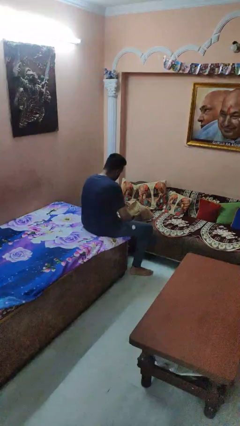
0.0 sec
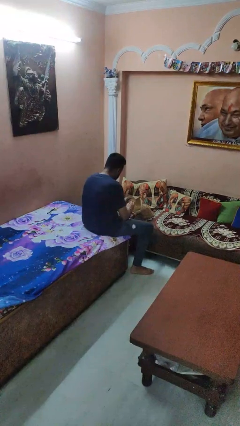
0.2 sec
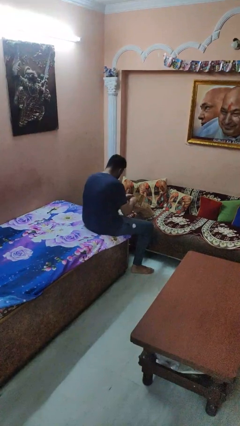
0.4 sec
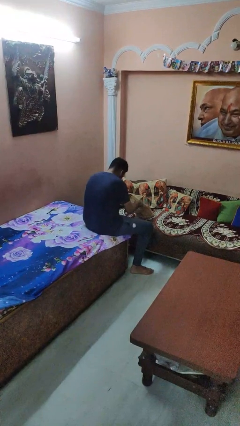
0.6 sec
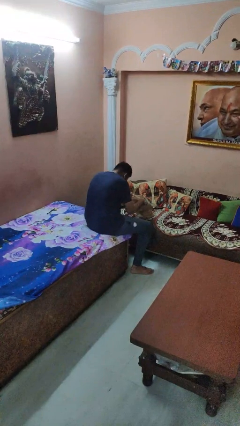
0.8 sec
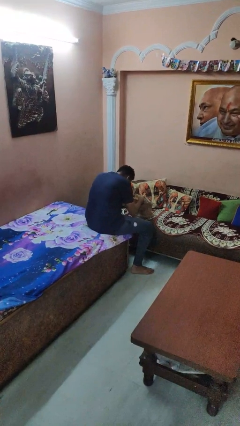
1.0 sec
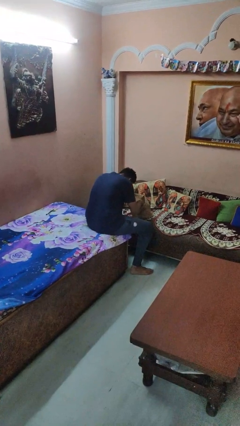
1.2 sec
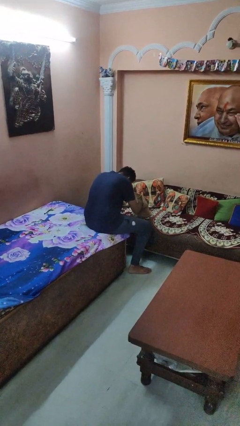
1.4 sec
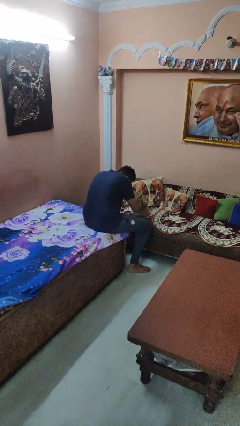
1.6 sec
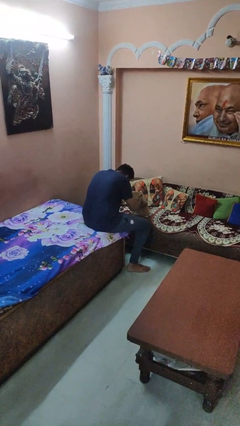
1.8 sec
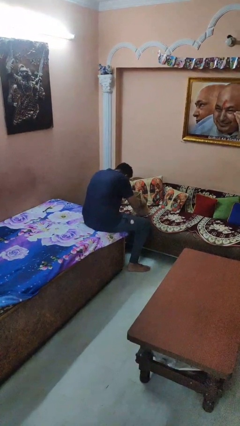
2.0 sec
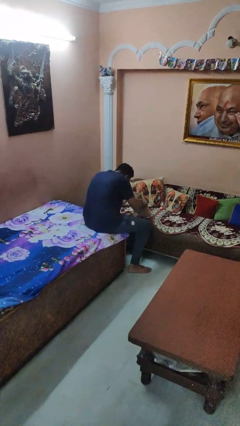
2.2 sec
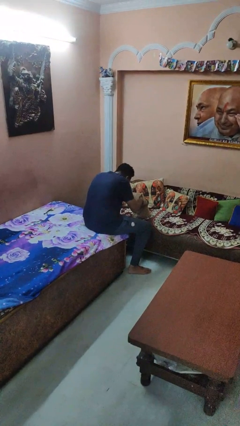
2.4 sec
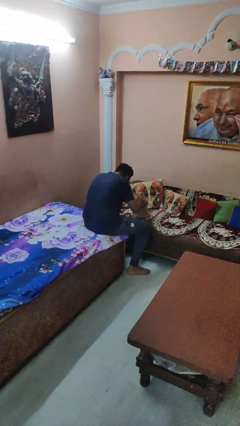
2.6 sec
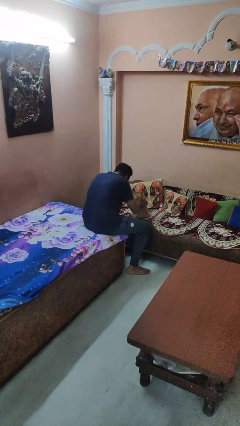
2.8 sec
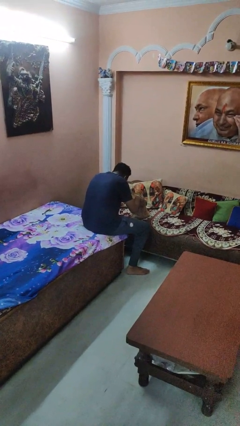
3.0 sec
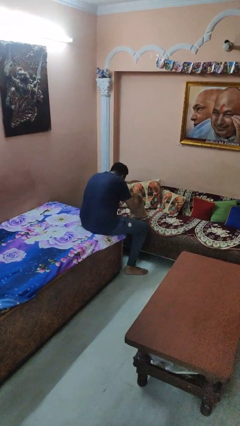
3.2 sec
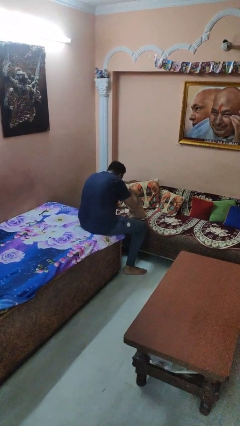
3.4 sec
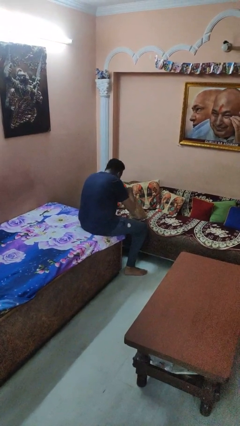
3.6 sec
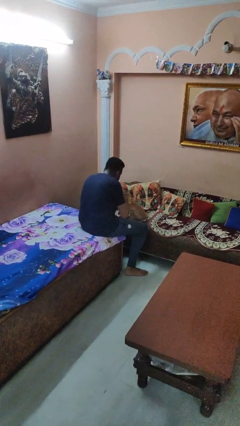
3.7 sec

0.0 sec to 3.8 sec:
person searches in bag

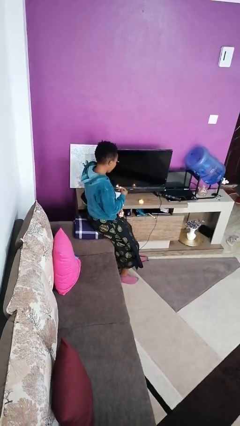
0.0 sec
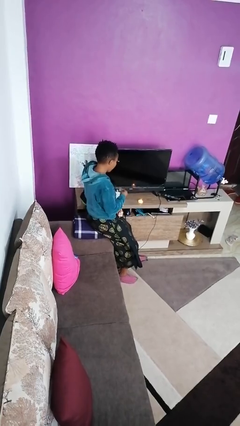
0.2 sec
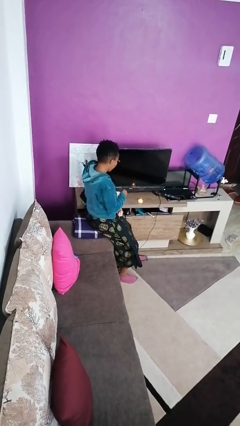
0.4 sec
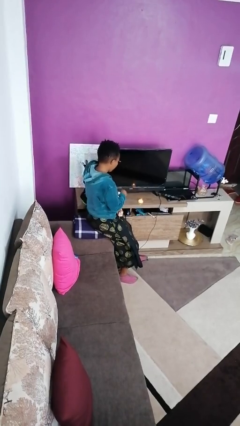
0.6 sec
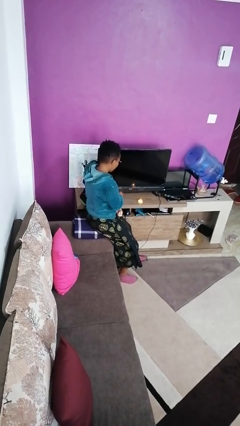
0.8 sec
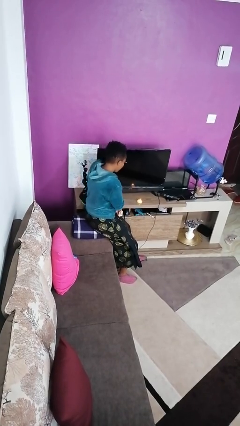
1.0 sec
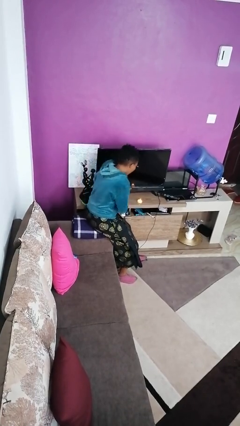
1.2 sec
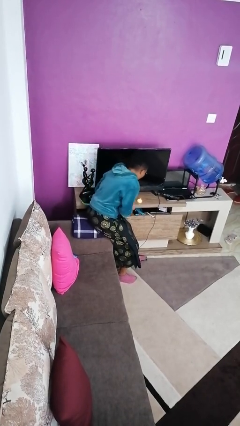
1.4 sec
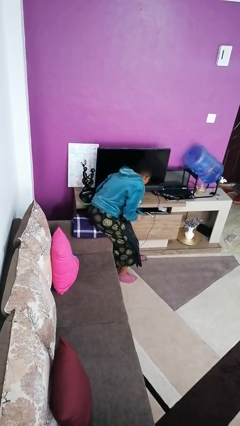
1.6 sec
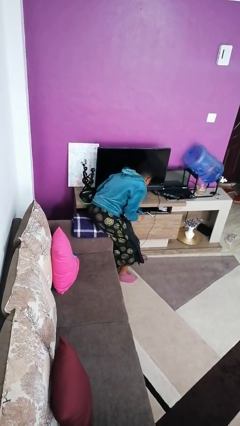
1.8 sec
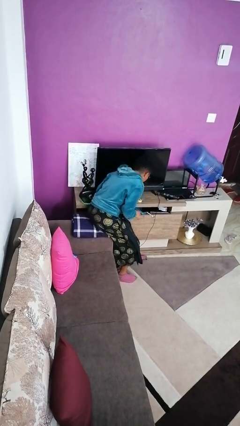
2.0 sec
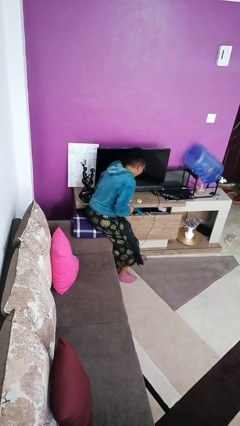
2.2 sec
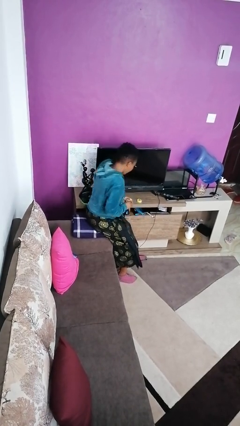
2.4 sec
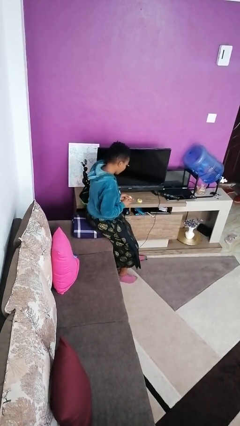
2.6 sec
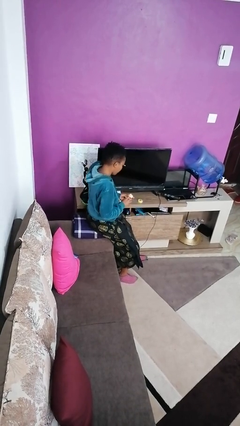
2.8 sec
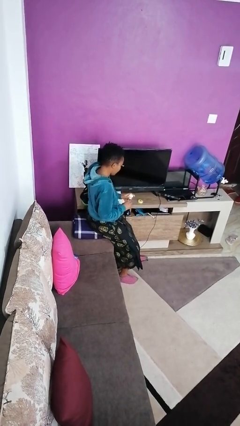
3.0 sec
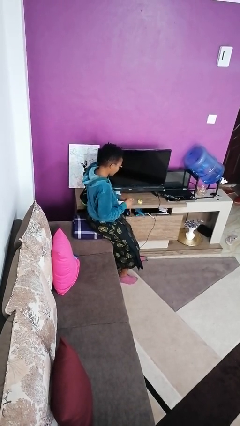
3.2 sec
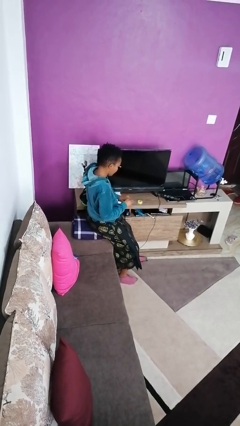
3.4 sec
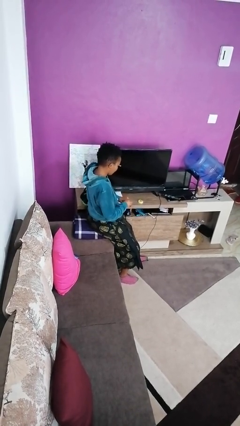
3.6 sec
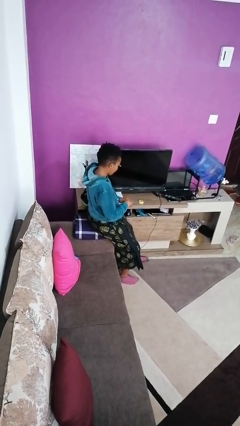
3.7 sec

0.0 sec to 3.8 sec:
person extinguishes candle

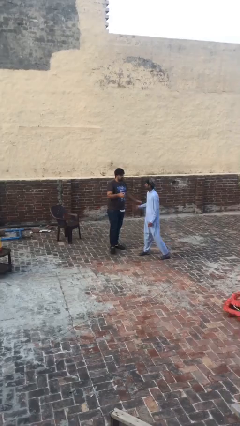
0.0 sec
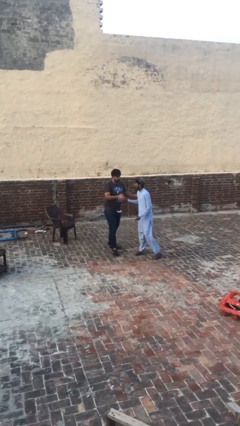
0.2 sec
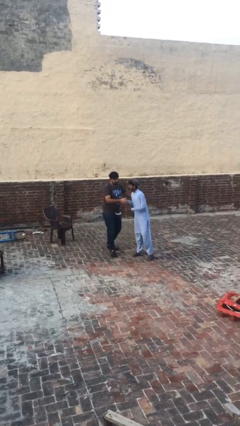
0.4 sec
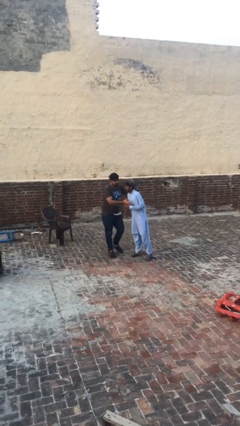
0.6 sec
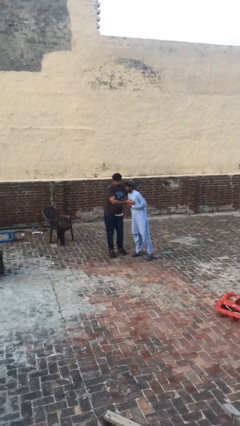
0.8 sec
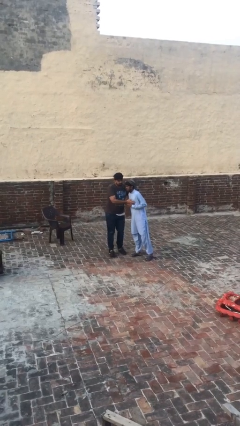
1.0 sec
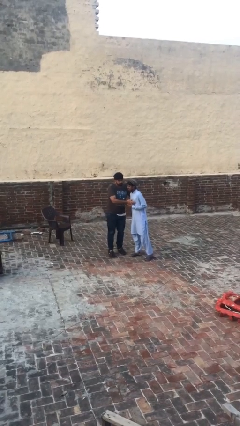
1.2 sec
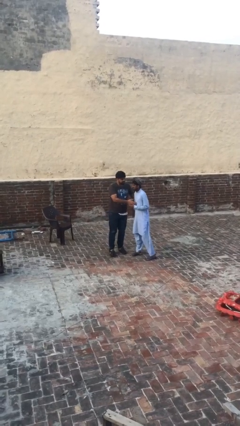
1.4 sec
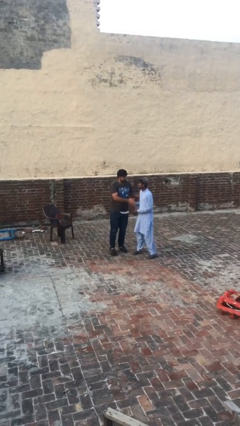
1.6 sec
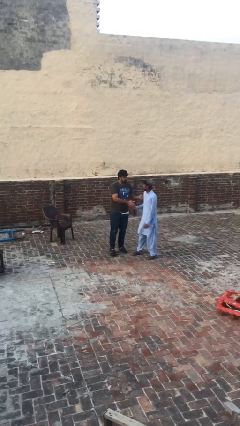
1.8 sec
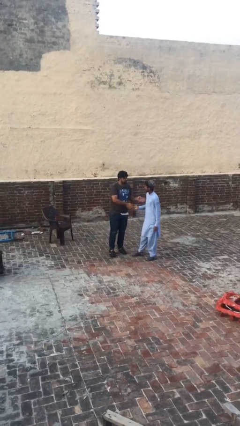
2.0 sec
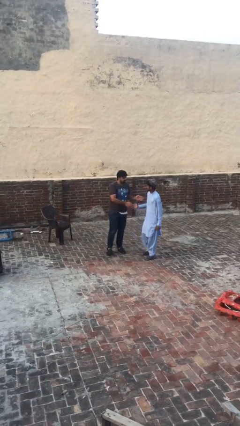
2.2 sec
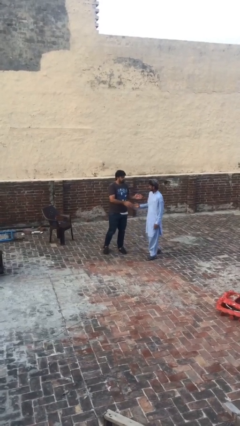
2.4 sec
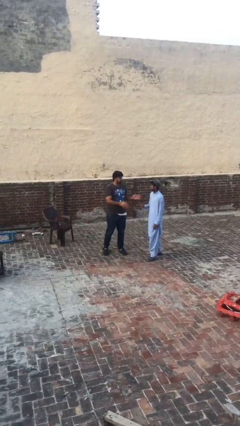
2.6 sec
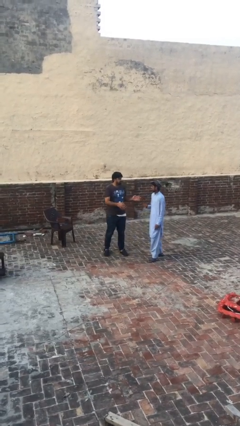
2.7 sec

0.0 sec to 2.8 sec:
person embraces person

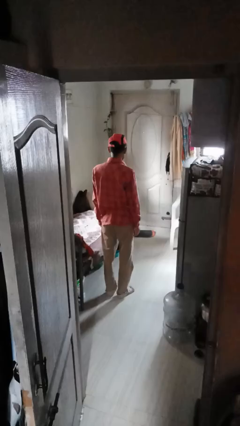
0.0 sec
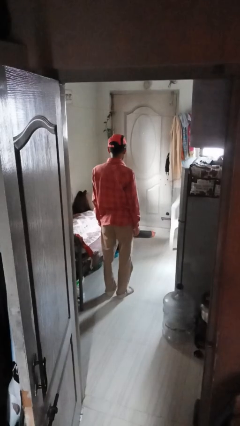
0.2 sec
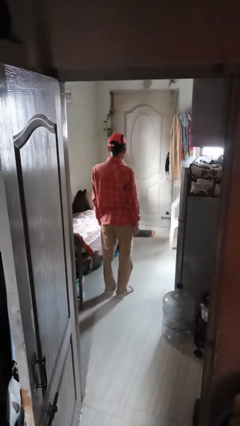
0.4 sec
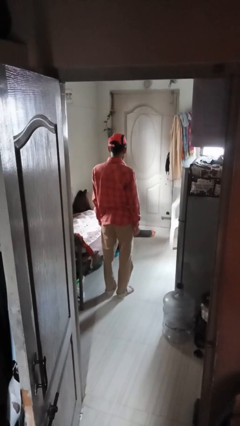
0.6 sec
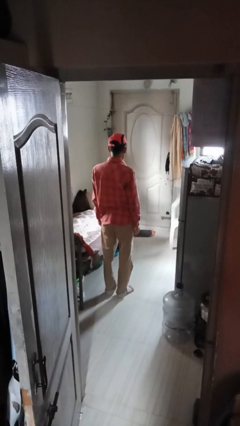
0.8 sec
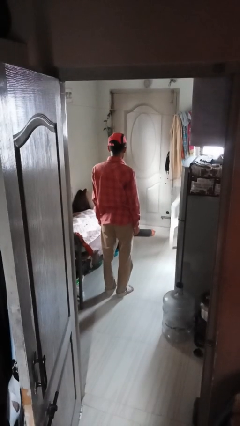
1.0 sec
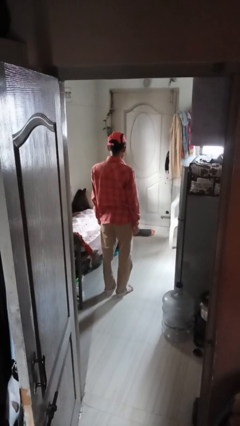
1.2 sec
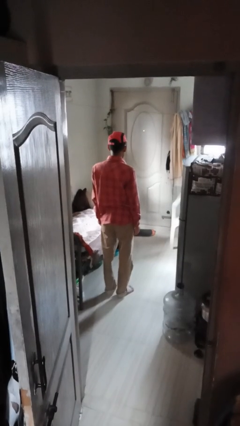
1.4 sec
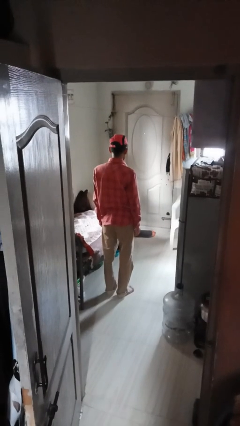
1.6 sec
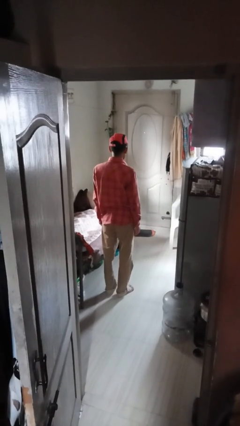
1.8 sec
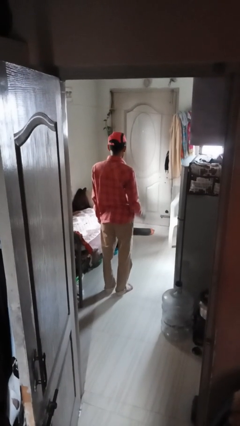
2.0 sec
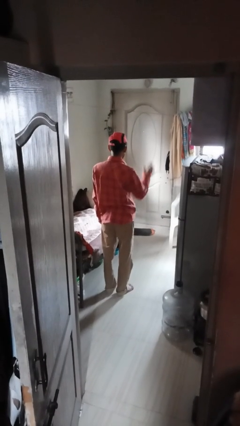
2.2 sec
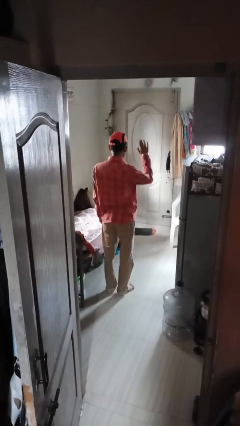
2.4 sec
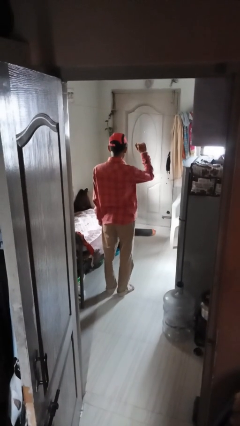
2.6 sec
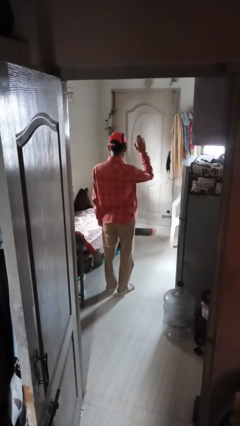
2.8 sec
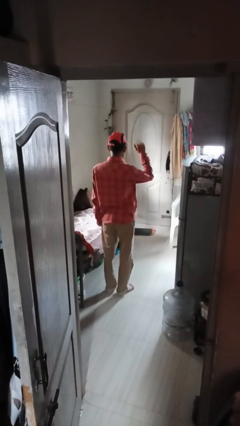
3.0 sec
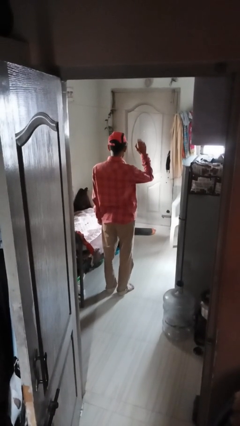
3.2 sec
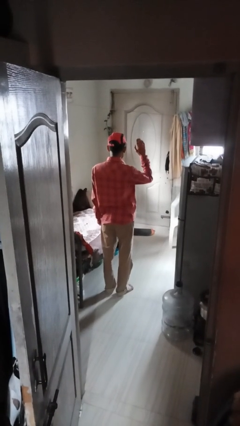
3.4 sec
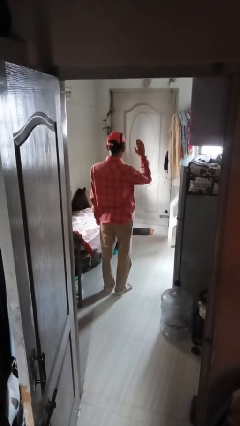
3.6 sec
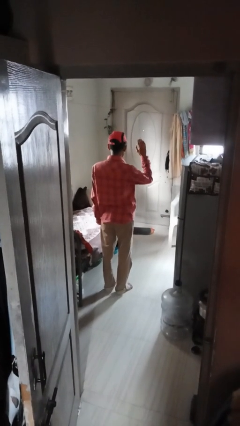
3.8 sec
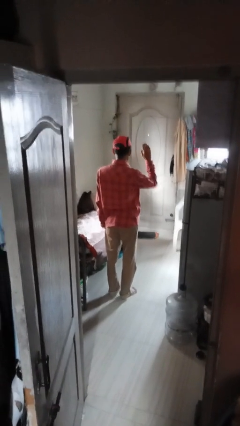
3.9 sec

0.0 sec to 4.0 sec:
person gestures come here

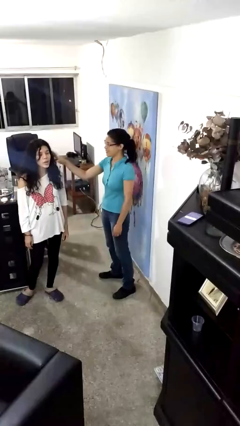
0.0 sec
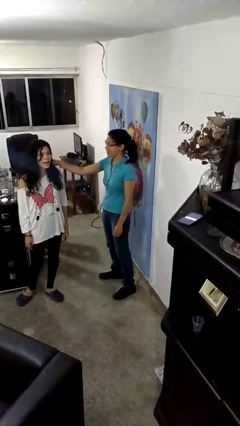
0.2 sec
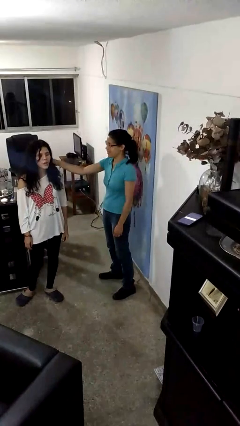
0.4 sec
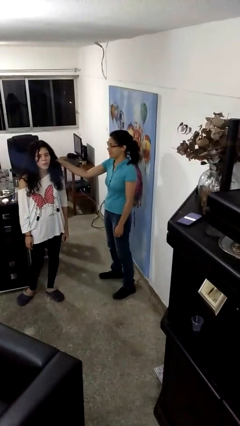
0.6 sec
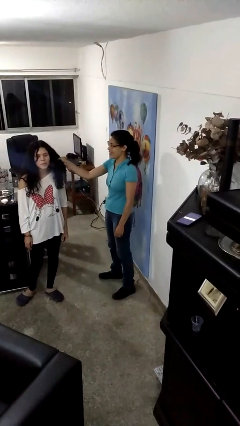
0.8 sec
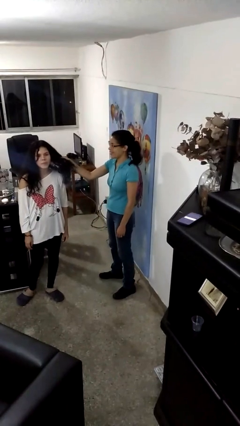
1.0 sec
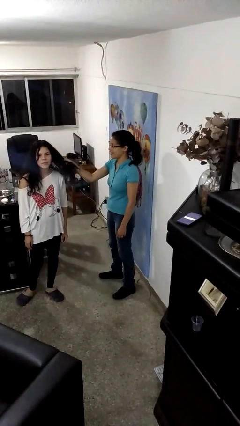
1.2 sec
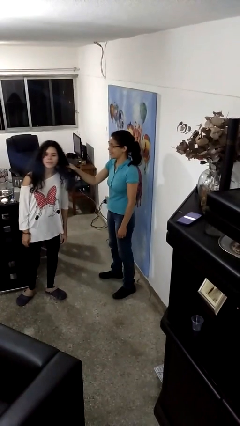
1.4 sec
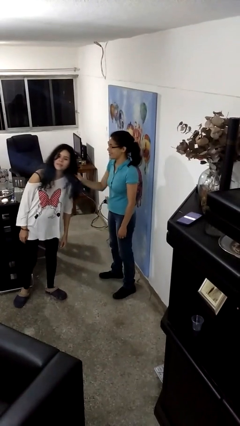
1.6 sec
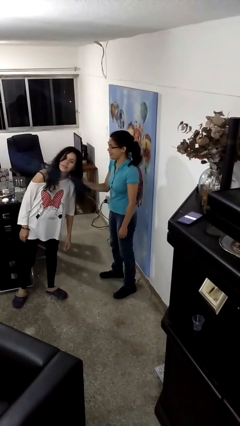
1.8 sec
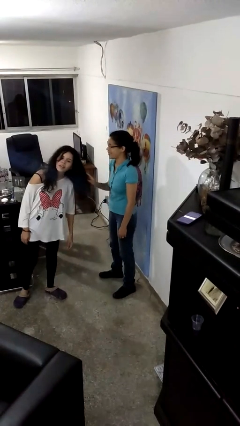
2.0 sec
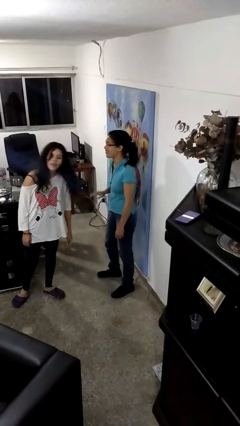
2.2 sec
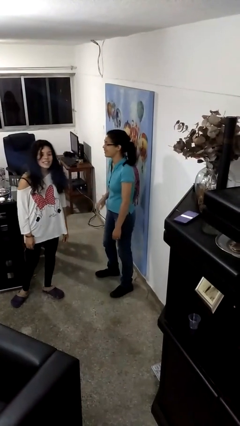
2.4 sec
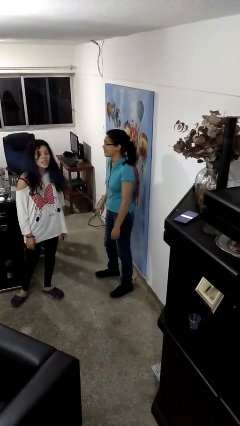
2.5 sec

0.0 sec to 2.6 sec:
person grabs person by hair

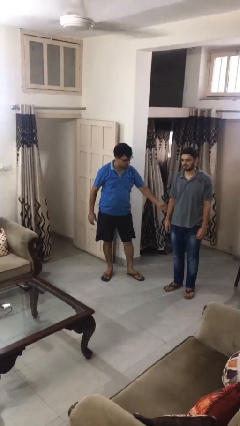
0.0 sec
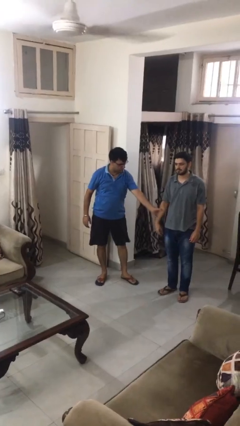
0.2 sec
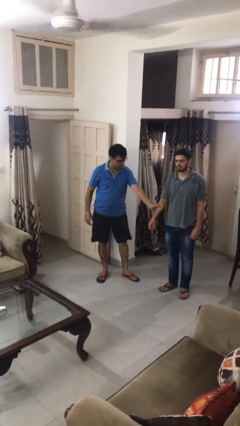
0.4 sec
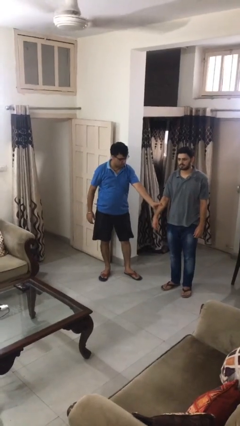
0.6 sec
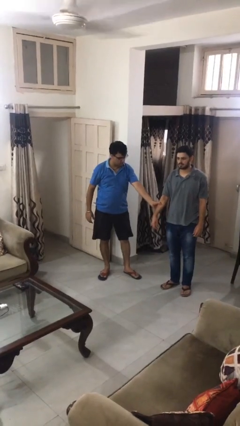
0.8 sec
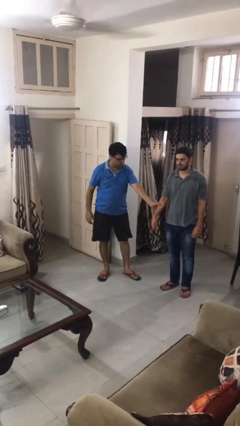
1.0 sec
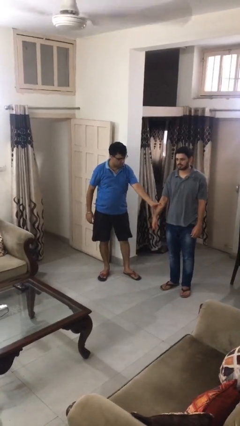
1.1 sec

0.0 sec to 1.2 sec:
person grabs person by forearm
